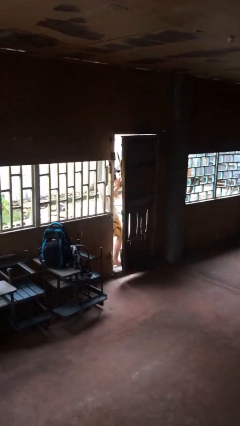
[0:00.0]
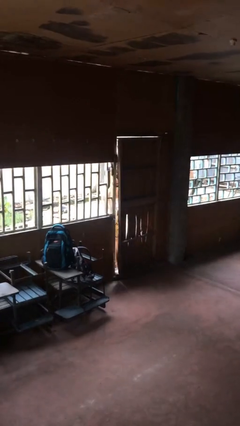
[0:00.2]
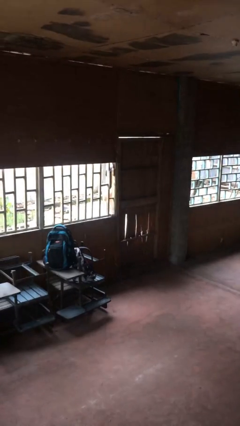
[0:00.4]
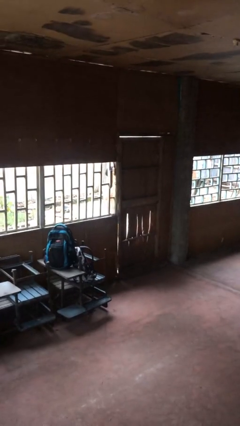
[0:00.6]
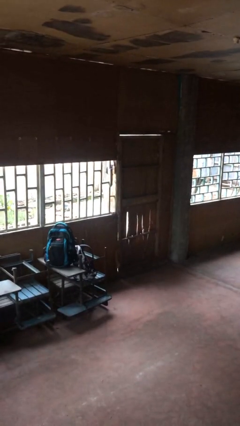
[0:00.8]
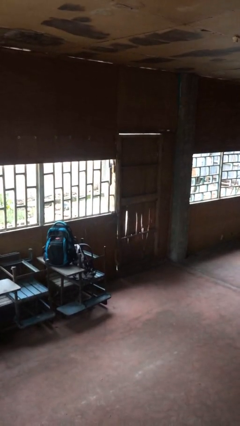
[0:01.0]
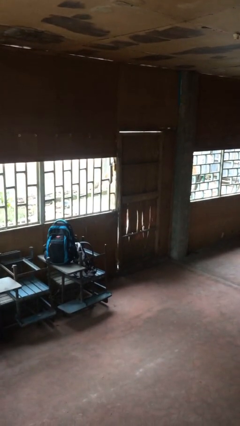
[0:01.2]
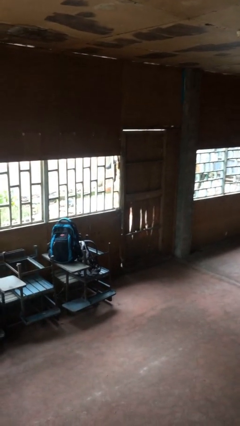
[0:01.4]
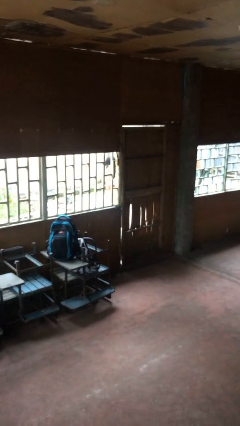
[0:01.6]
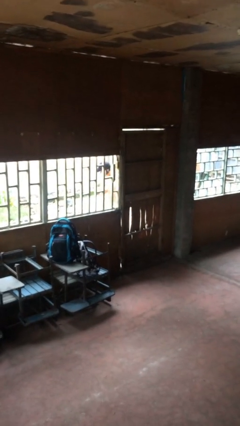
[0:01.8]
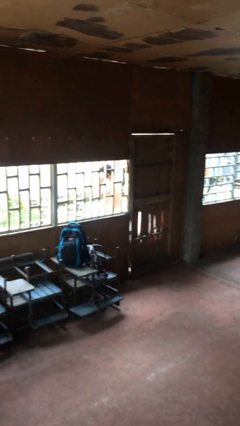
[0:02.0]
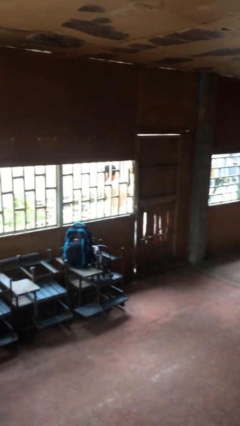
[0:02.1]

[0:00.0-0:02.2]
person closes facility door

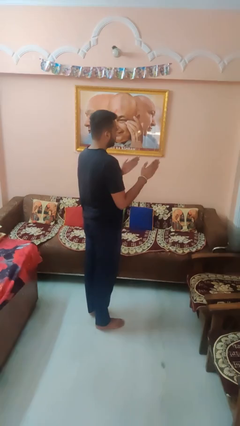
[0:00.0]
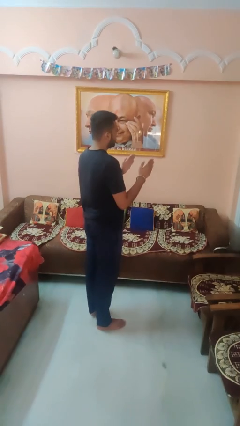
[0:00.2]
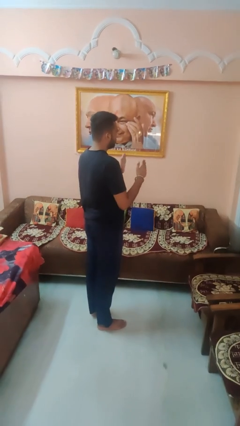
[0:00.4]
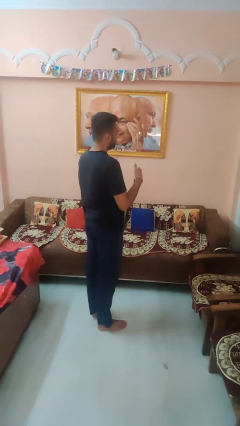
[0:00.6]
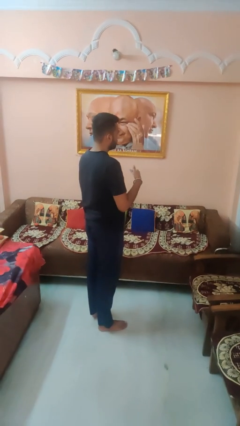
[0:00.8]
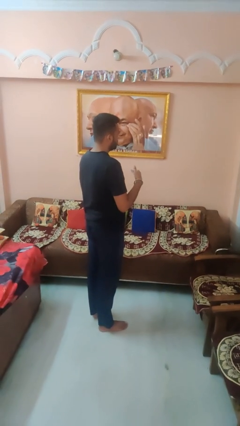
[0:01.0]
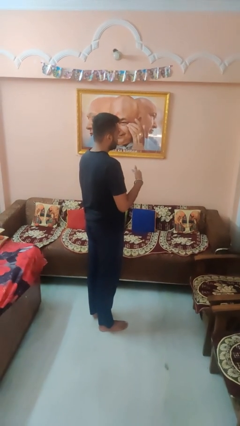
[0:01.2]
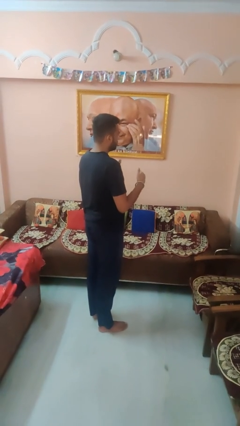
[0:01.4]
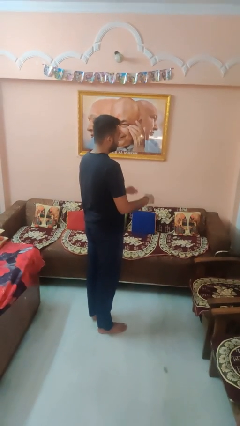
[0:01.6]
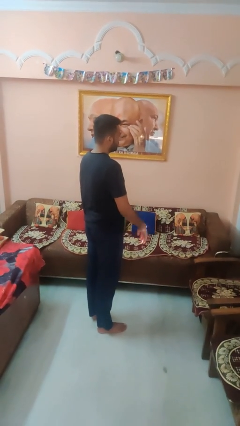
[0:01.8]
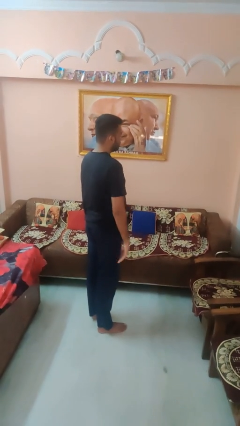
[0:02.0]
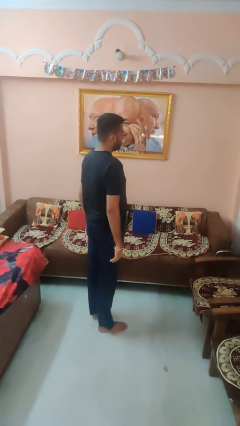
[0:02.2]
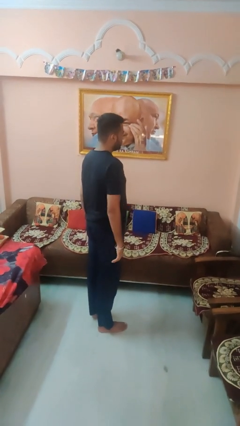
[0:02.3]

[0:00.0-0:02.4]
person gestures swipe left

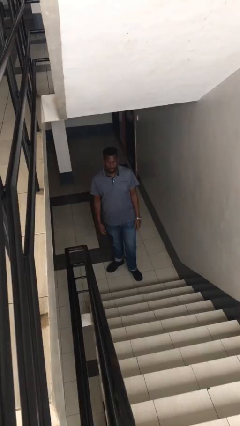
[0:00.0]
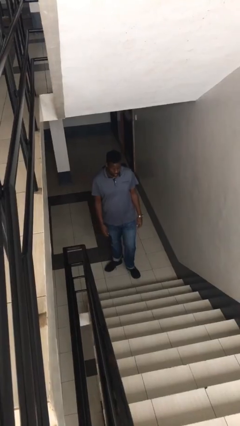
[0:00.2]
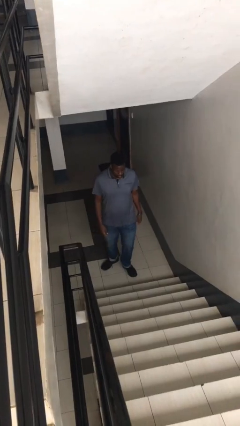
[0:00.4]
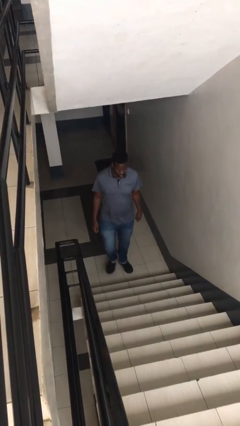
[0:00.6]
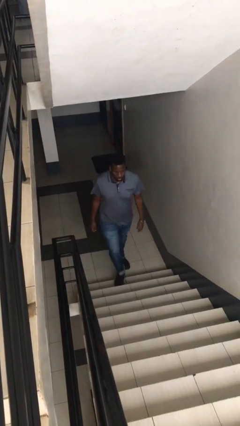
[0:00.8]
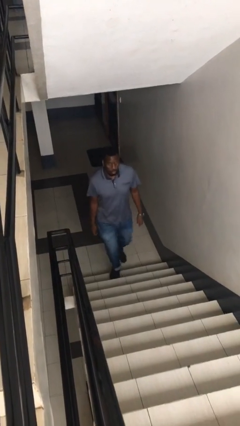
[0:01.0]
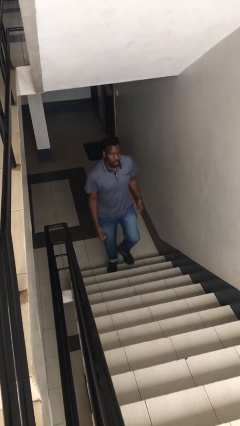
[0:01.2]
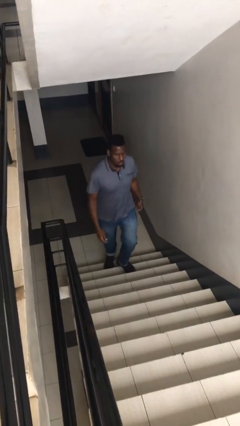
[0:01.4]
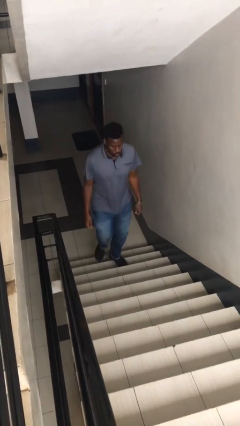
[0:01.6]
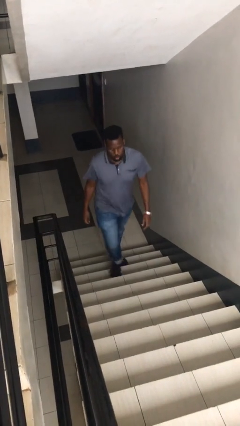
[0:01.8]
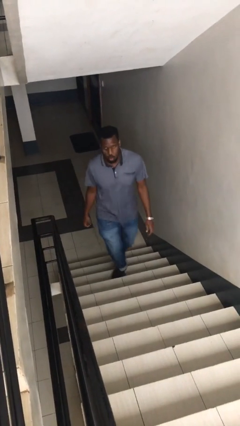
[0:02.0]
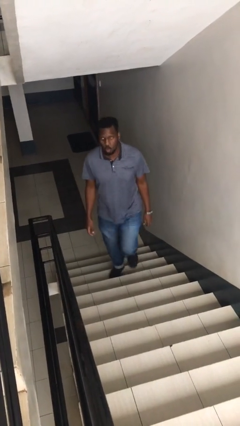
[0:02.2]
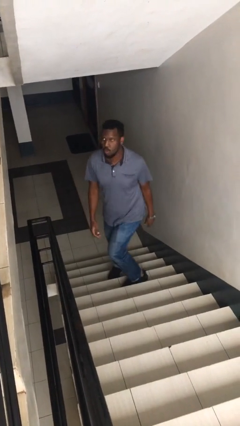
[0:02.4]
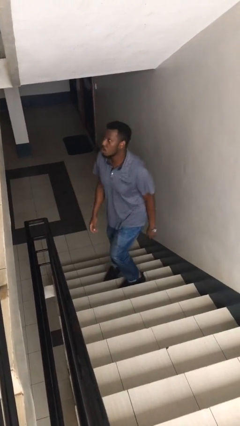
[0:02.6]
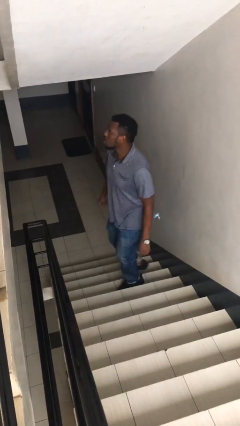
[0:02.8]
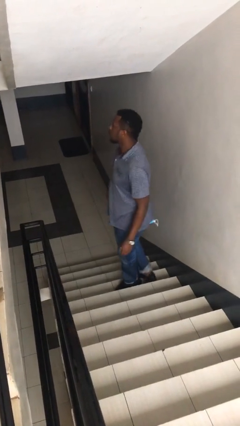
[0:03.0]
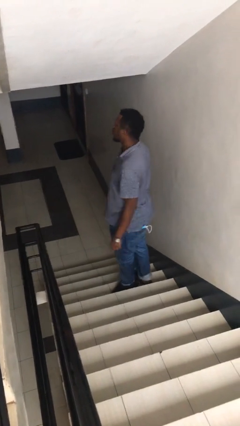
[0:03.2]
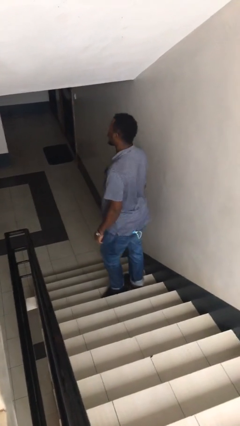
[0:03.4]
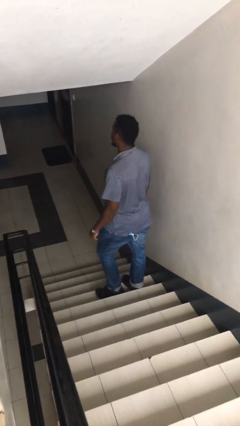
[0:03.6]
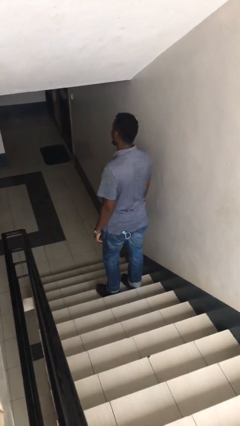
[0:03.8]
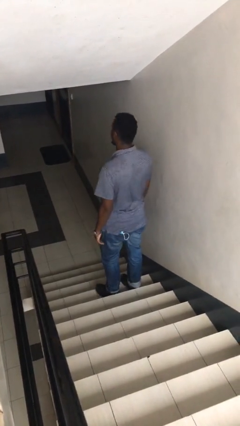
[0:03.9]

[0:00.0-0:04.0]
person climbs up stairs

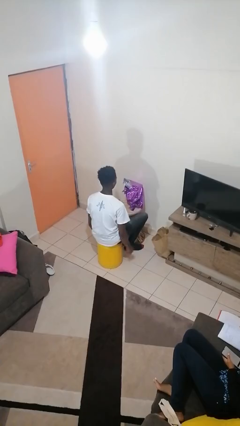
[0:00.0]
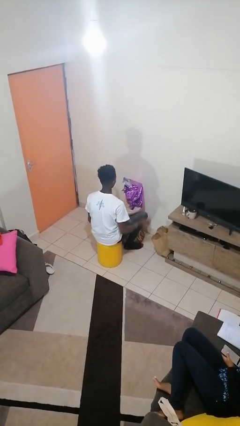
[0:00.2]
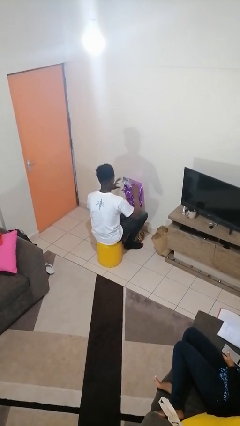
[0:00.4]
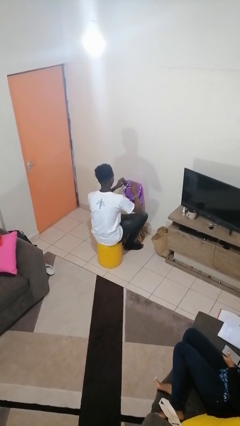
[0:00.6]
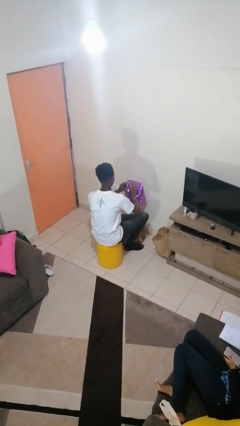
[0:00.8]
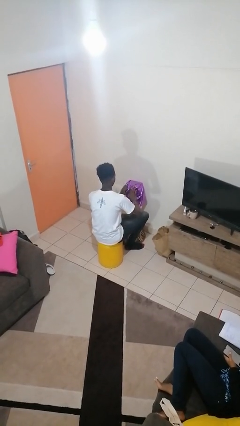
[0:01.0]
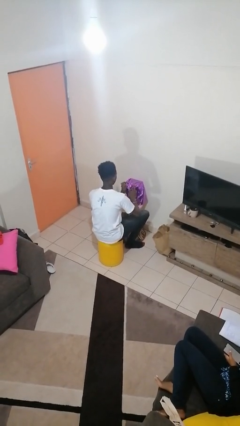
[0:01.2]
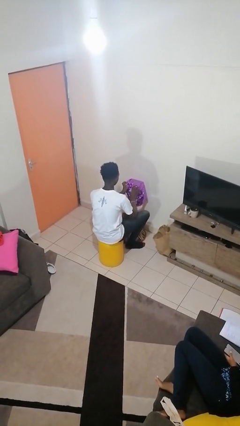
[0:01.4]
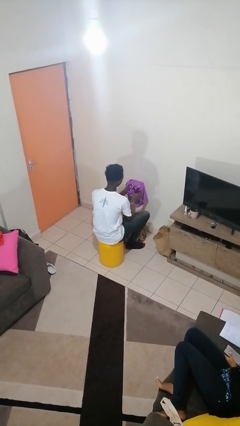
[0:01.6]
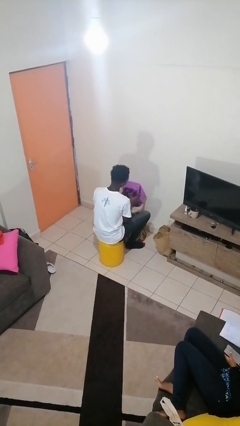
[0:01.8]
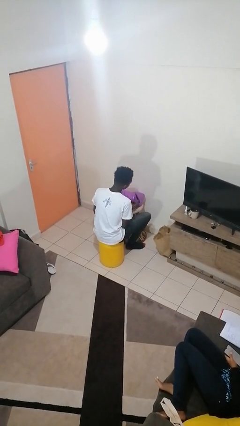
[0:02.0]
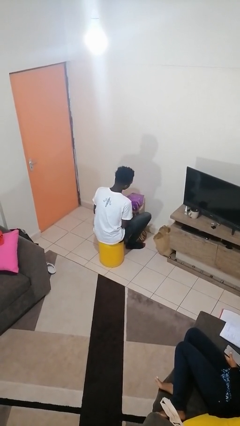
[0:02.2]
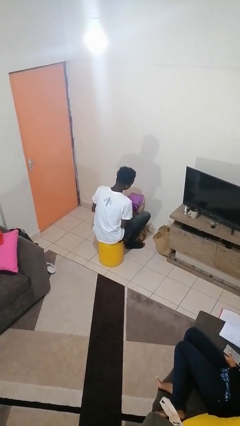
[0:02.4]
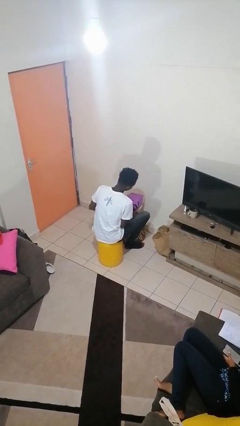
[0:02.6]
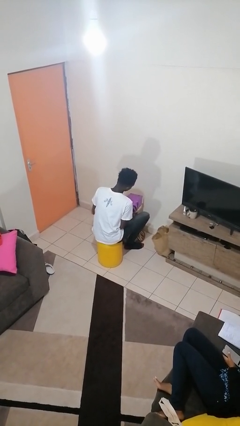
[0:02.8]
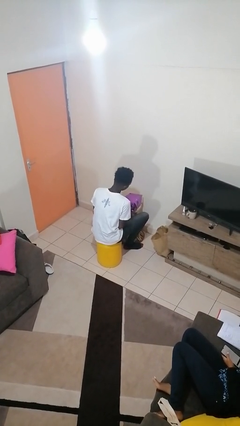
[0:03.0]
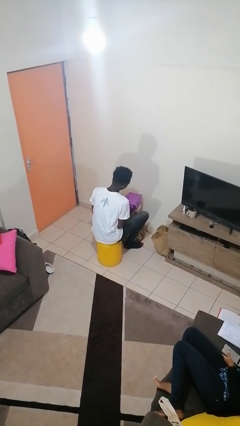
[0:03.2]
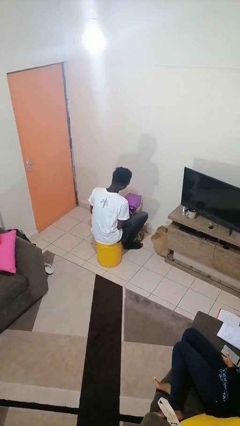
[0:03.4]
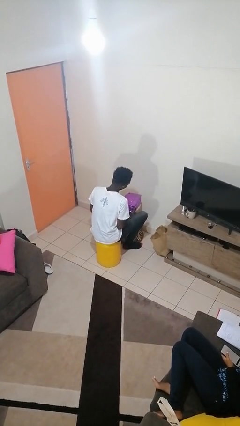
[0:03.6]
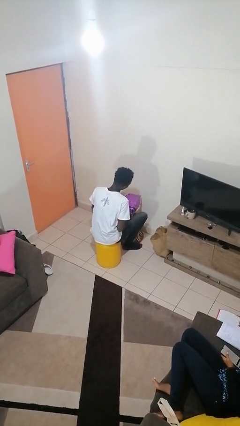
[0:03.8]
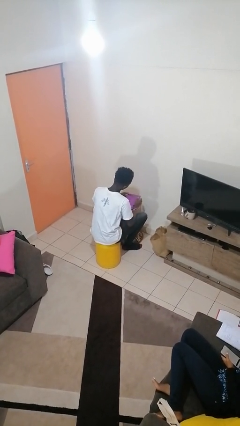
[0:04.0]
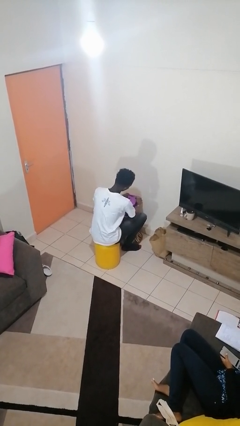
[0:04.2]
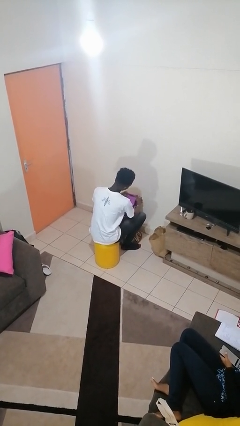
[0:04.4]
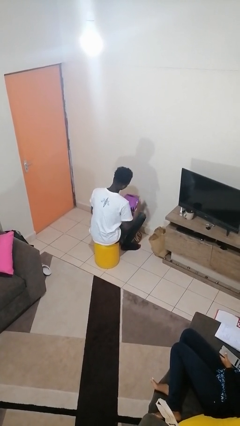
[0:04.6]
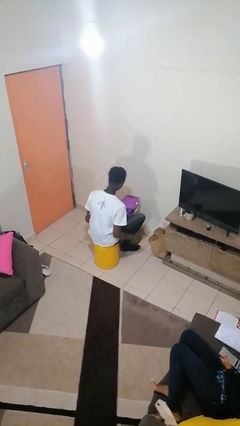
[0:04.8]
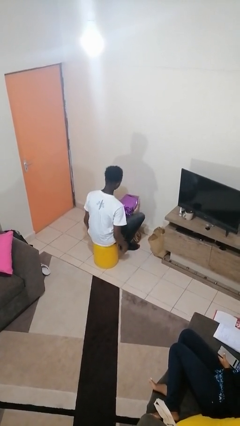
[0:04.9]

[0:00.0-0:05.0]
person wraps box

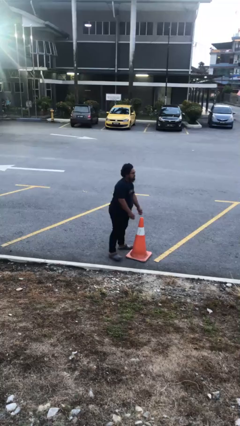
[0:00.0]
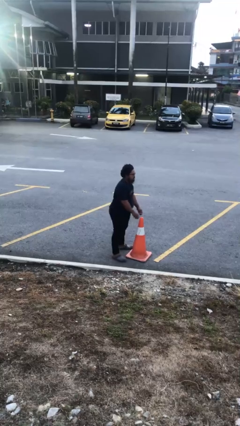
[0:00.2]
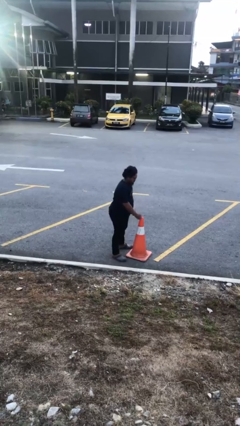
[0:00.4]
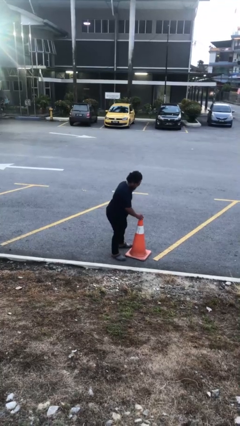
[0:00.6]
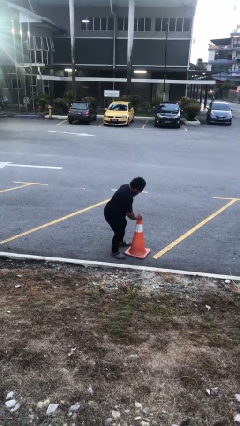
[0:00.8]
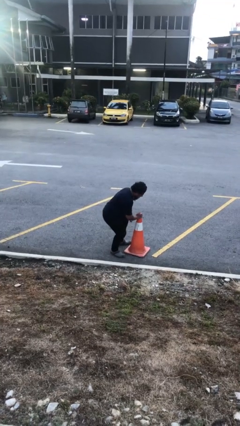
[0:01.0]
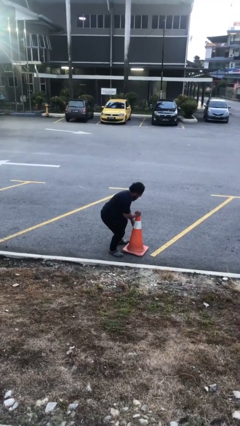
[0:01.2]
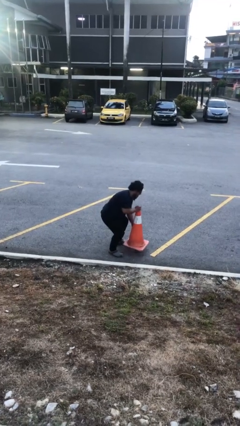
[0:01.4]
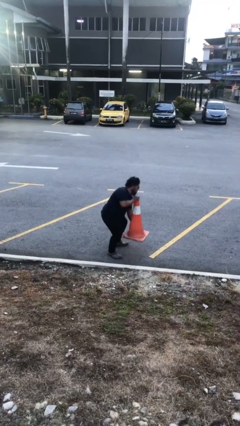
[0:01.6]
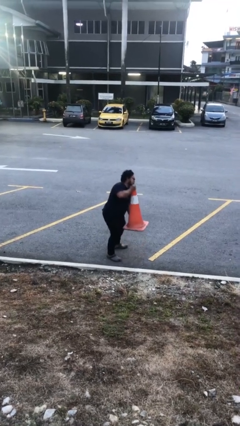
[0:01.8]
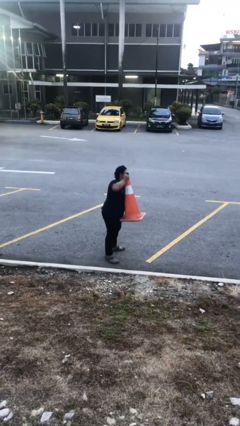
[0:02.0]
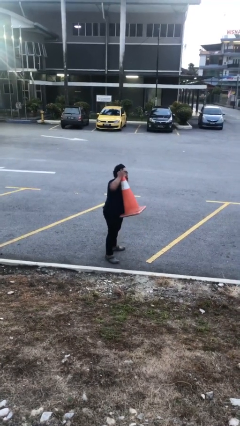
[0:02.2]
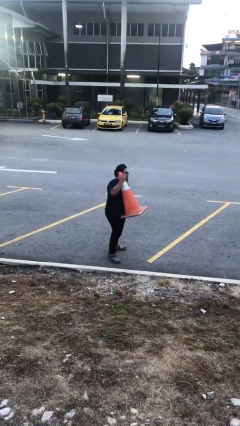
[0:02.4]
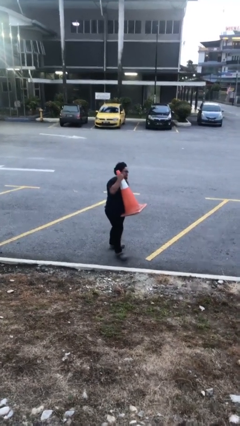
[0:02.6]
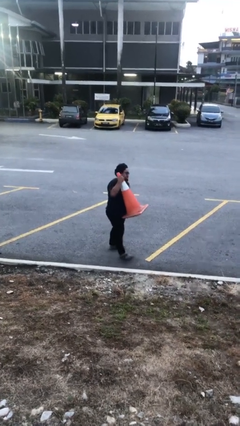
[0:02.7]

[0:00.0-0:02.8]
person picks up object from floor

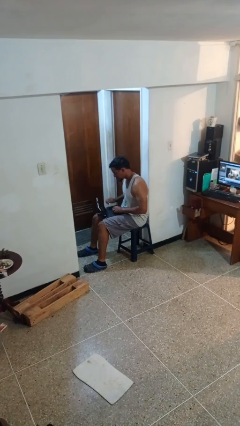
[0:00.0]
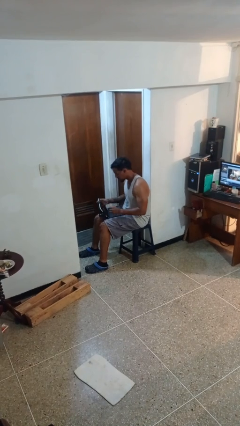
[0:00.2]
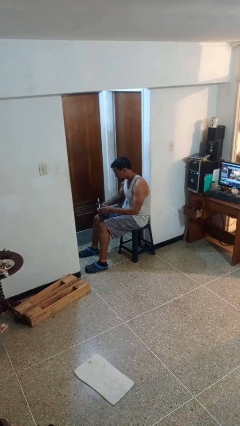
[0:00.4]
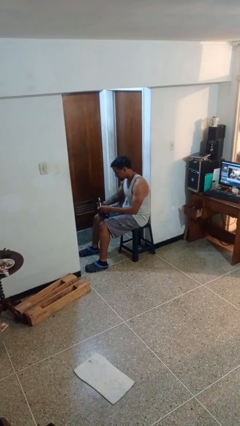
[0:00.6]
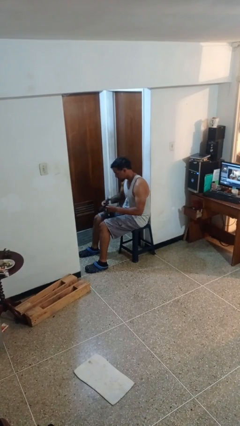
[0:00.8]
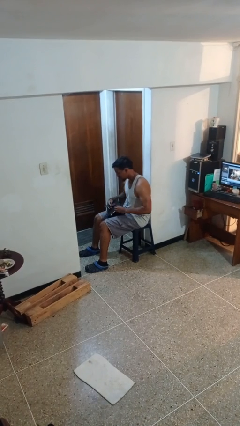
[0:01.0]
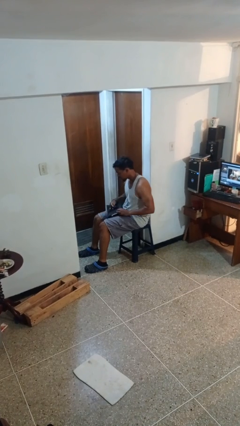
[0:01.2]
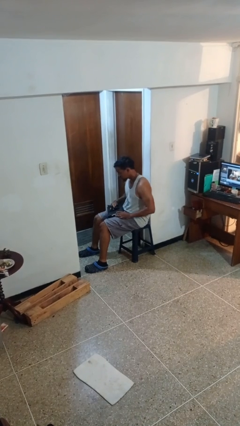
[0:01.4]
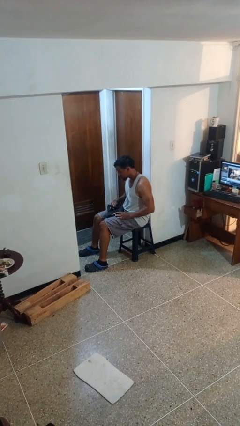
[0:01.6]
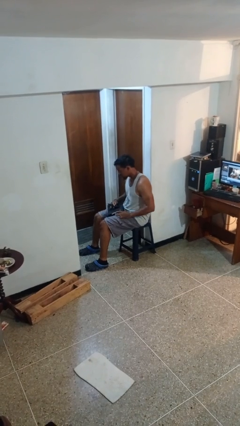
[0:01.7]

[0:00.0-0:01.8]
person closes laptop
